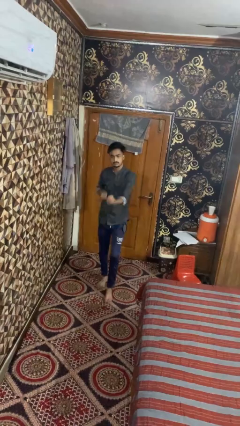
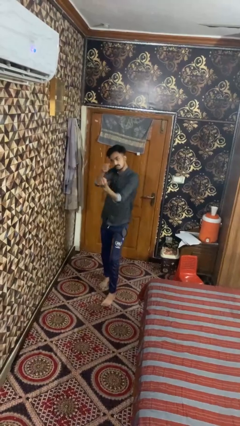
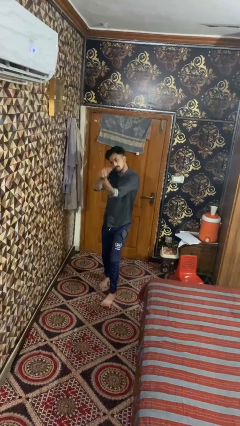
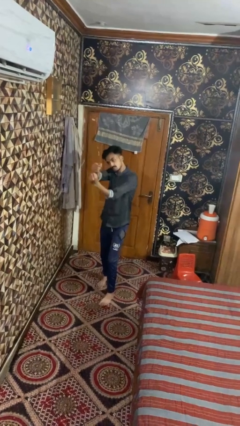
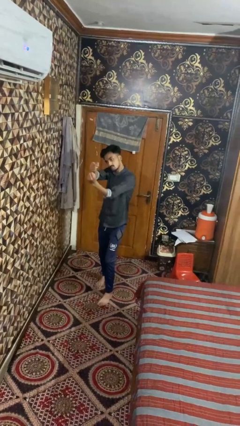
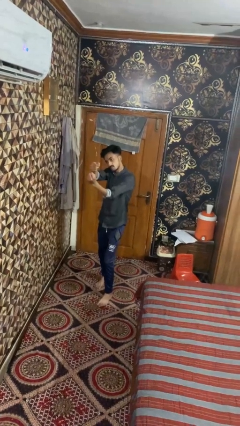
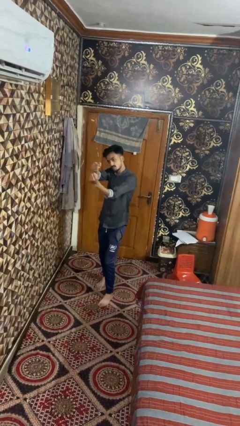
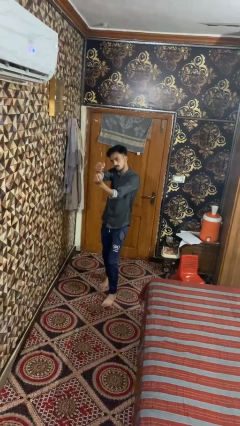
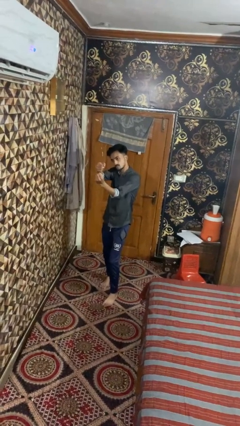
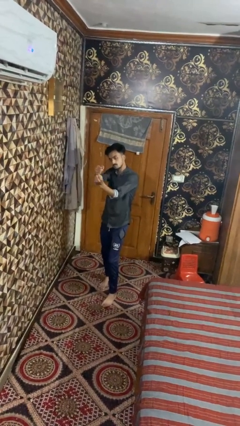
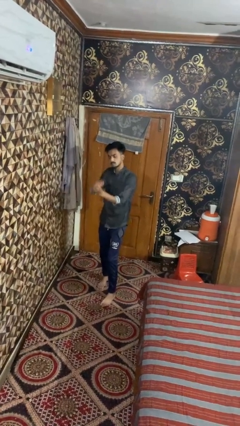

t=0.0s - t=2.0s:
person punches

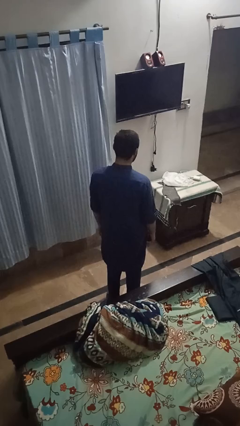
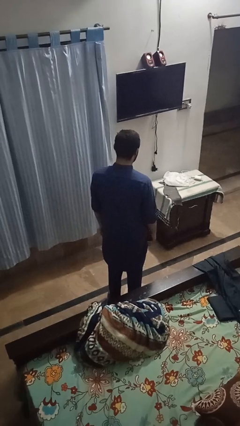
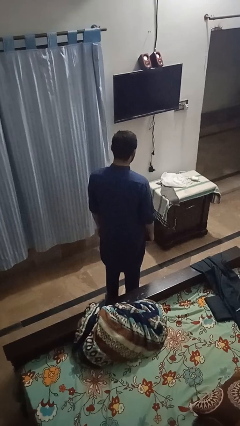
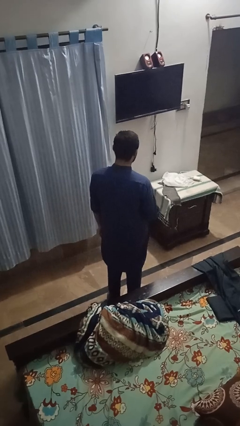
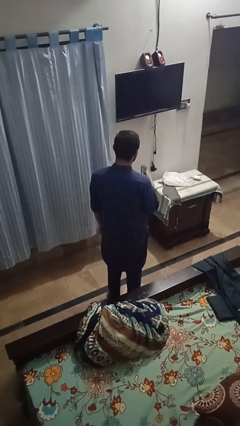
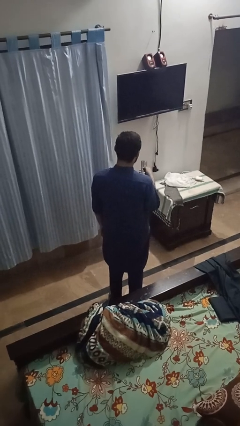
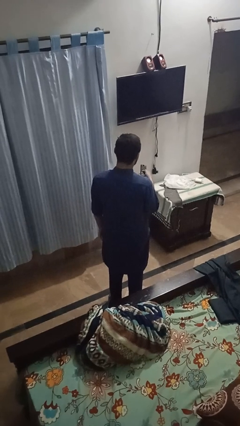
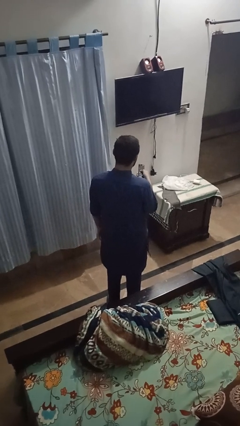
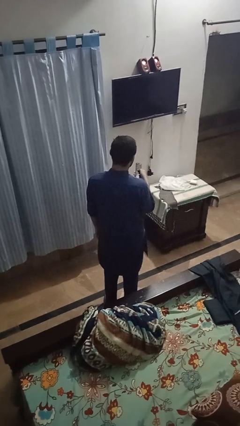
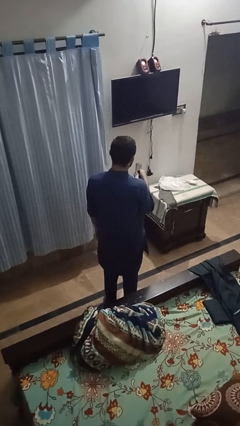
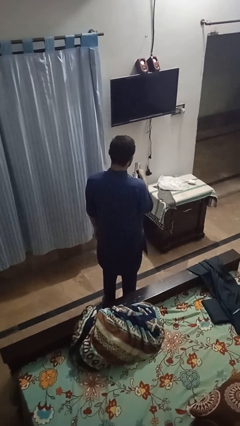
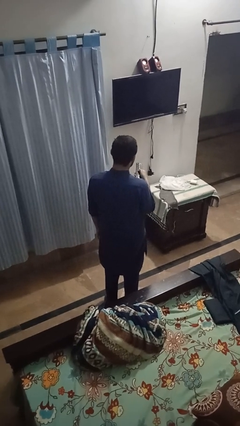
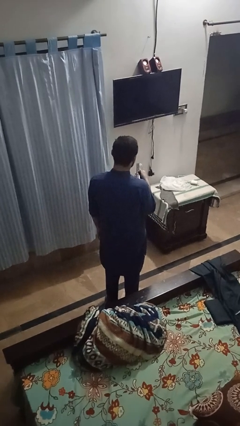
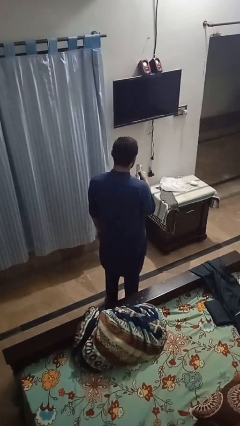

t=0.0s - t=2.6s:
person uses television remote

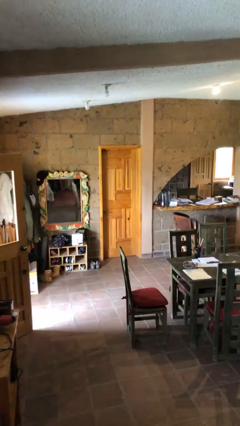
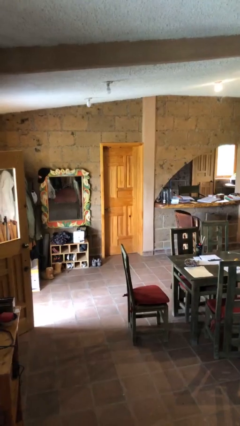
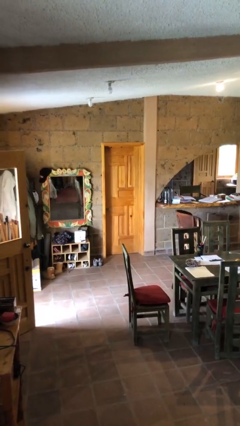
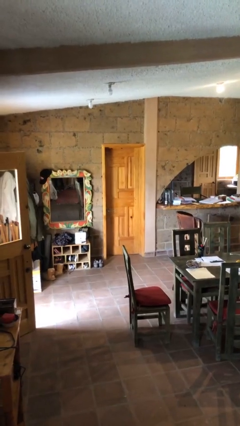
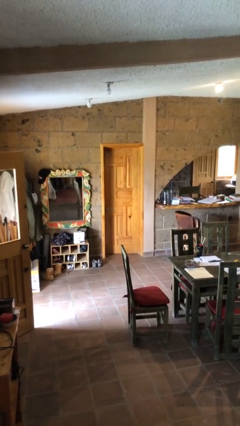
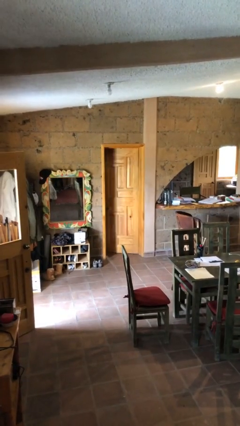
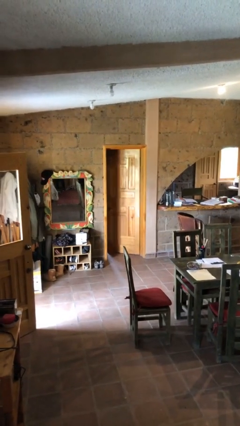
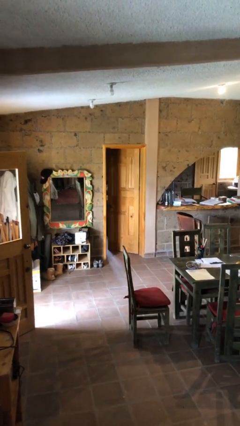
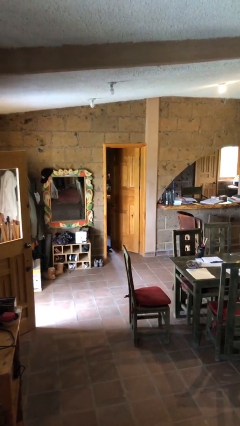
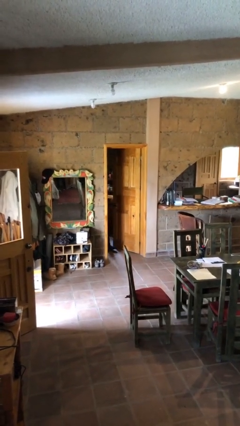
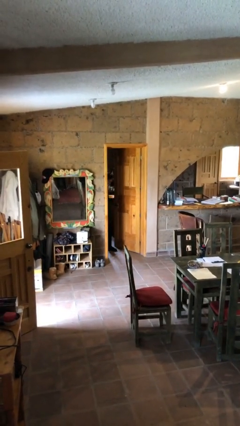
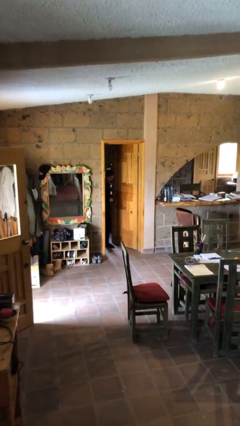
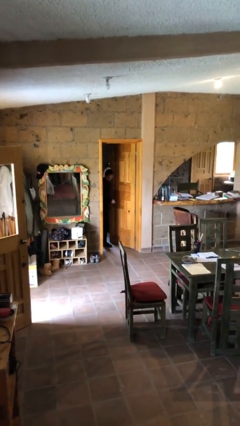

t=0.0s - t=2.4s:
person opens facility door

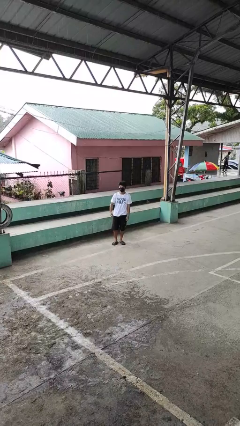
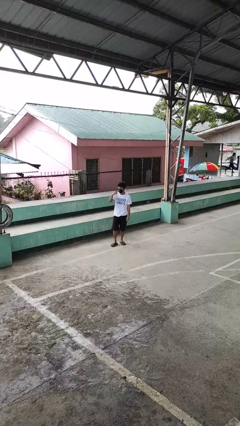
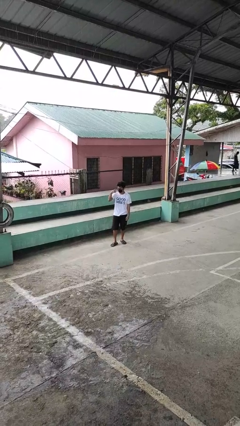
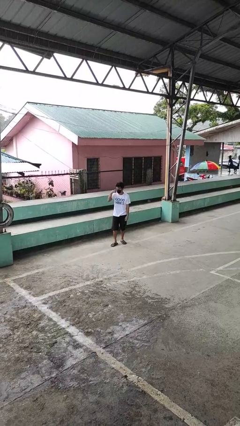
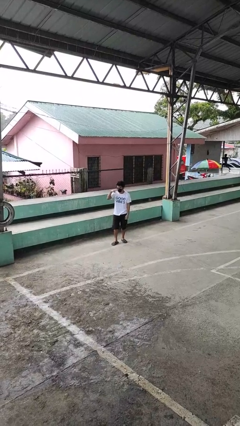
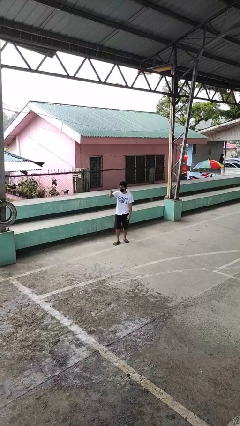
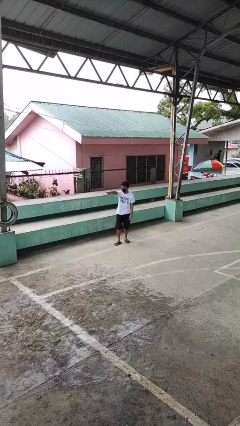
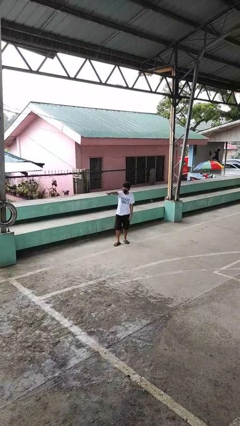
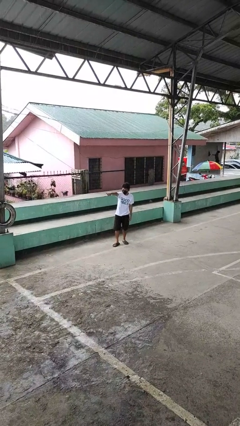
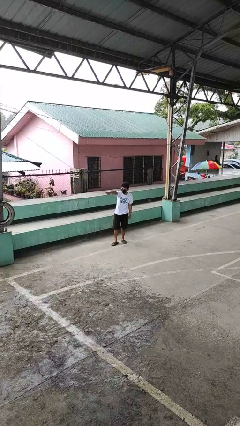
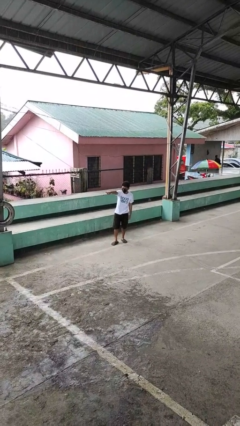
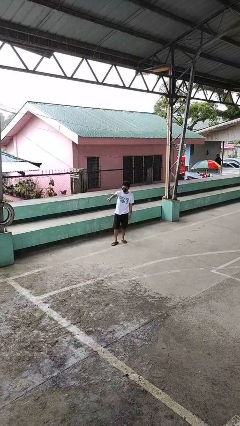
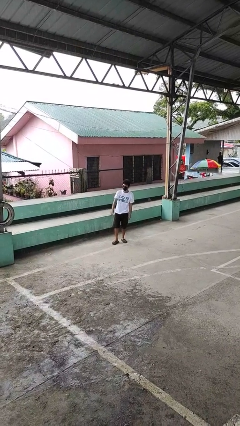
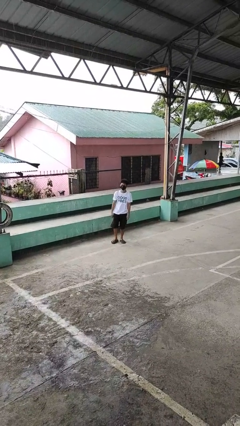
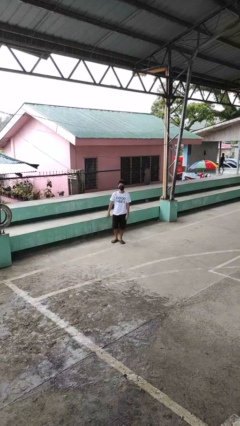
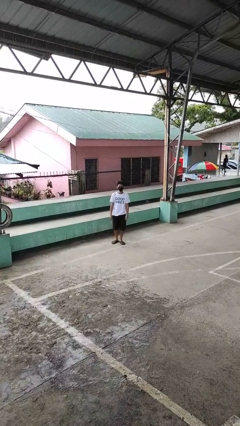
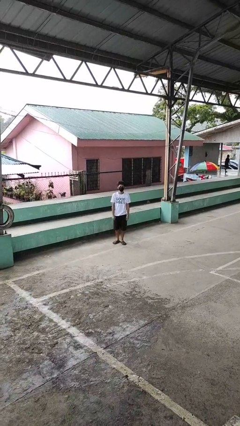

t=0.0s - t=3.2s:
person gestures watch closely

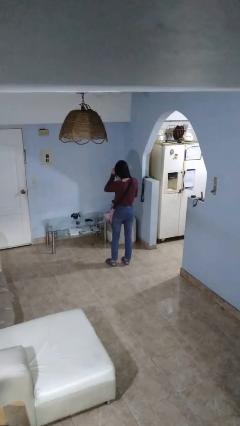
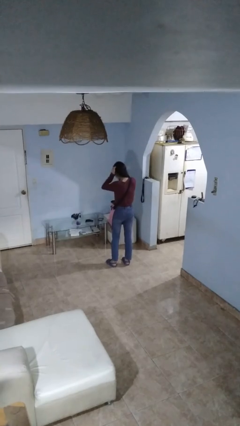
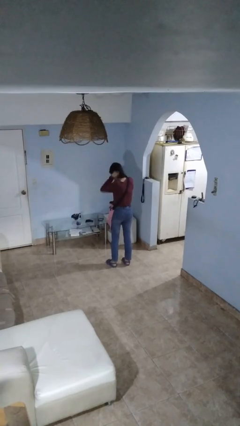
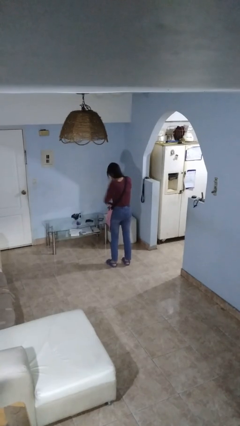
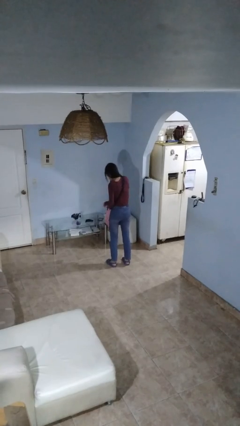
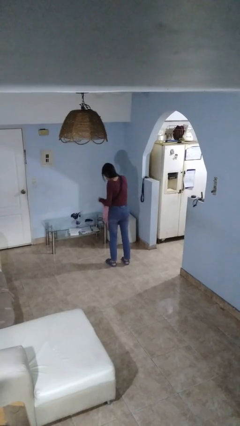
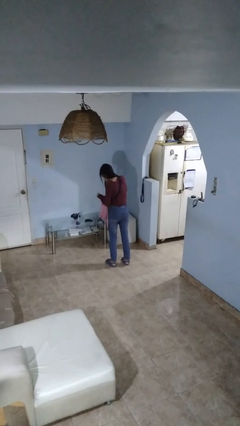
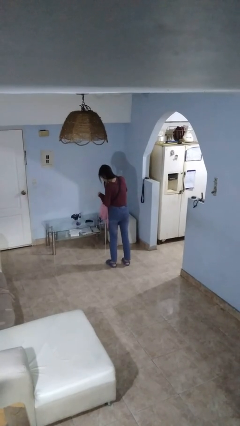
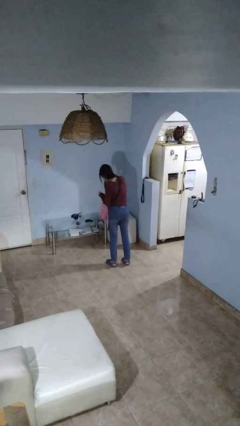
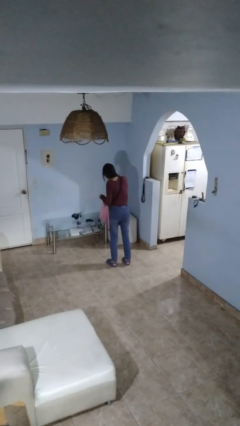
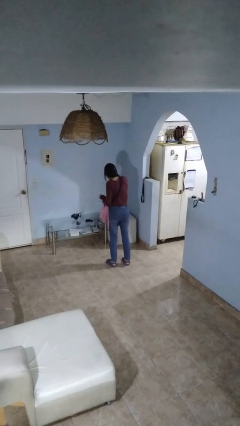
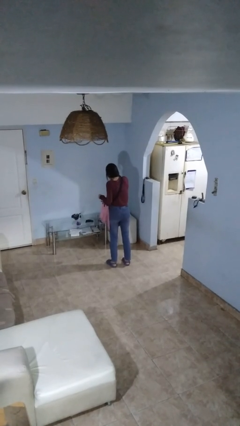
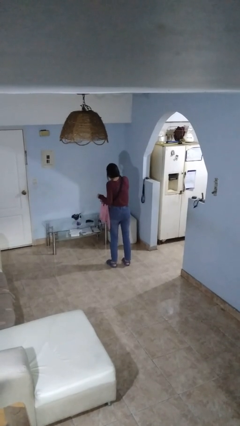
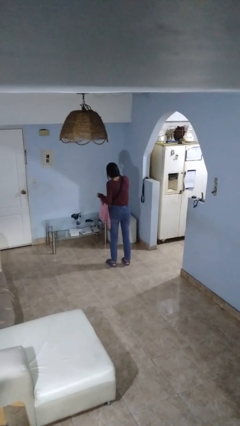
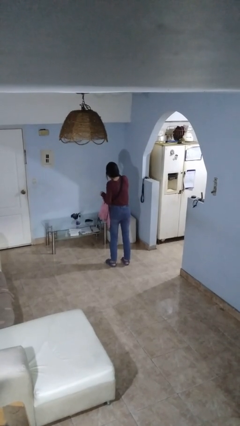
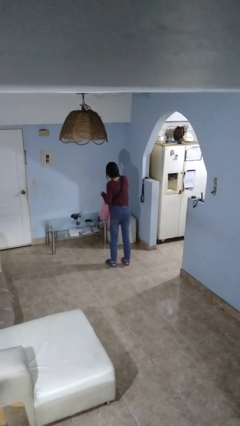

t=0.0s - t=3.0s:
person searches in backpack

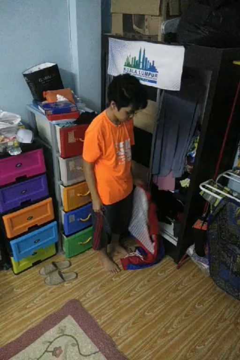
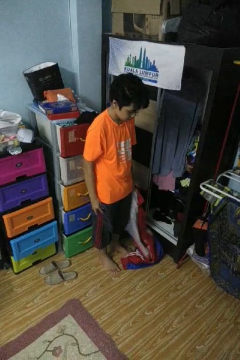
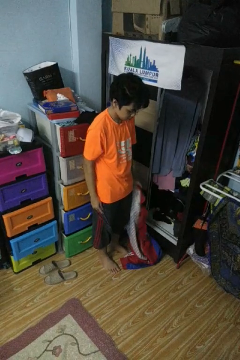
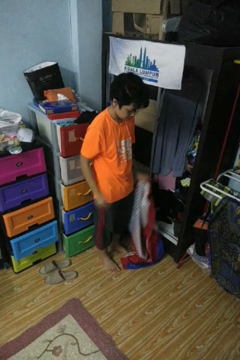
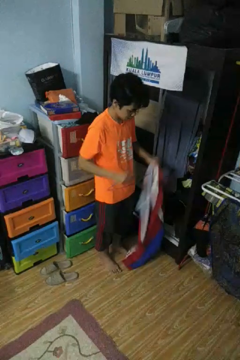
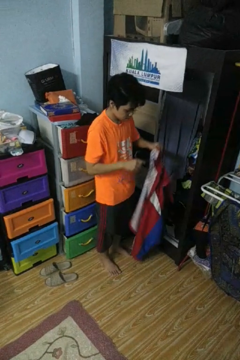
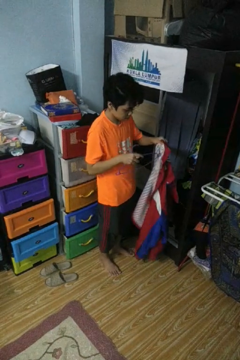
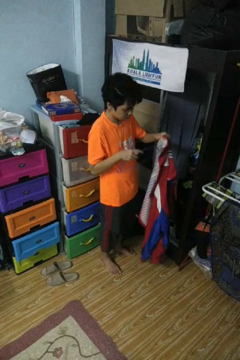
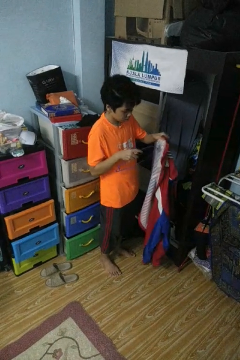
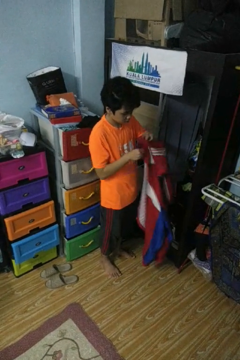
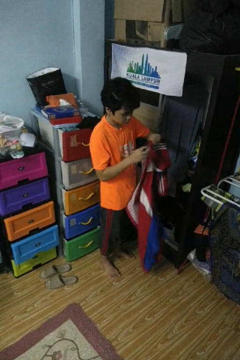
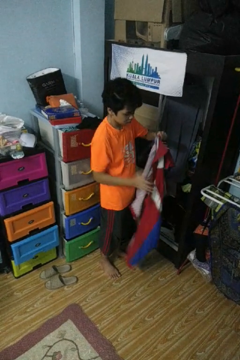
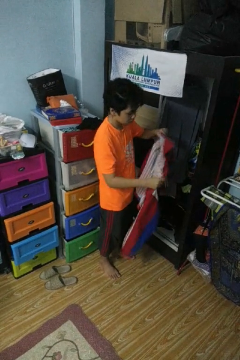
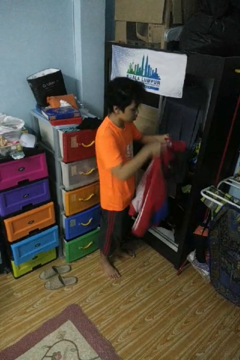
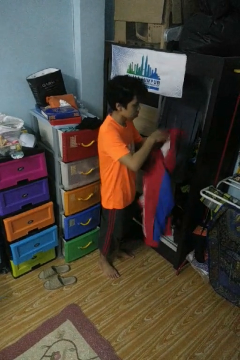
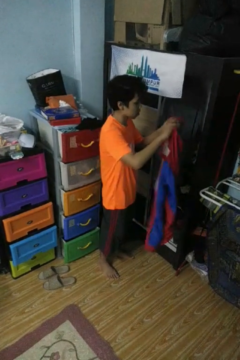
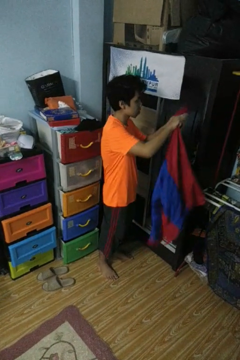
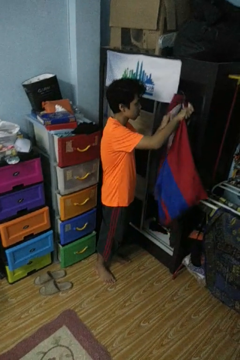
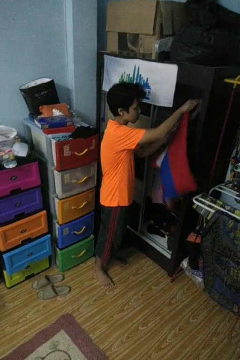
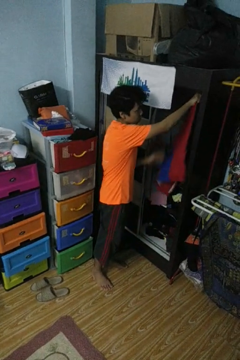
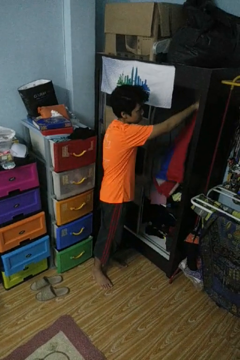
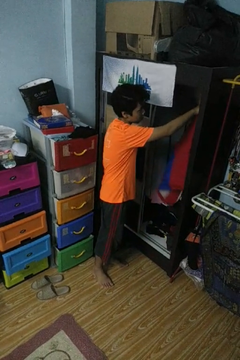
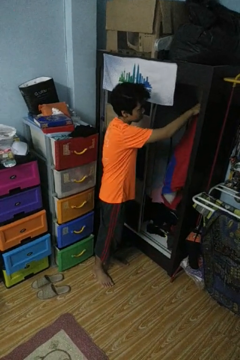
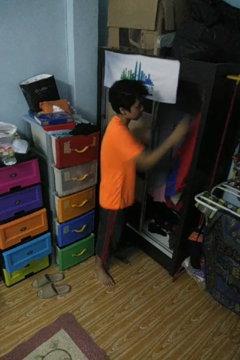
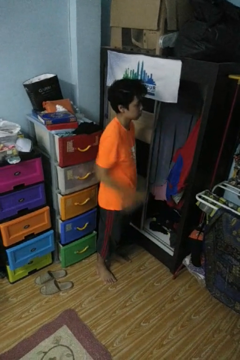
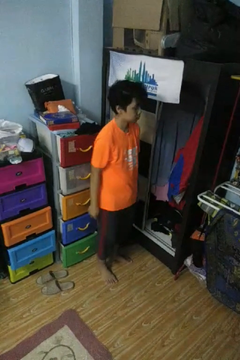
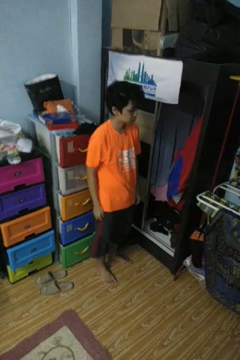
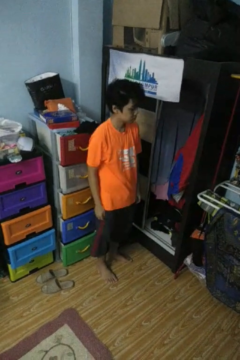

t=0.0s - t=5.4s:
person puts clothes into closet
